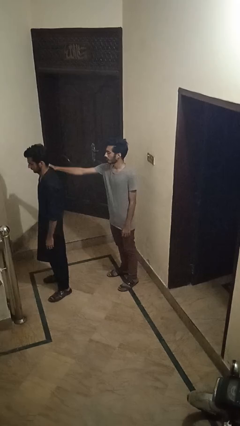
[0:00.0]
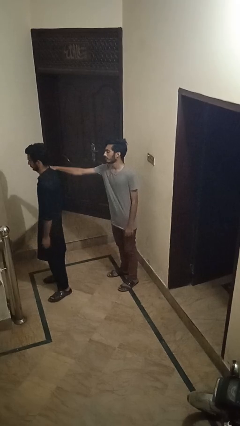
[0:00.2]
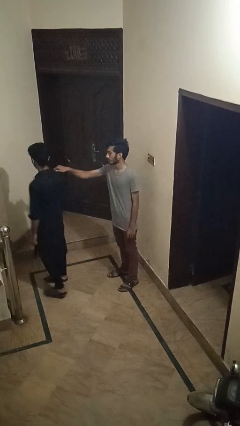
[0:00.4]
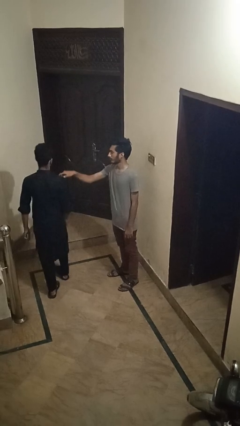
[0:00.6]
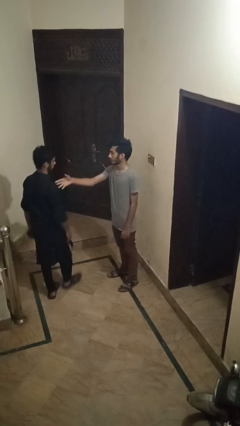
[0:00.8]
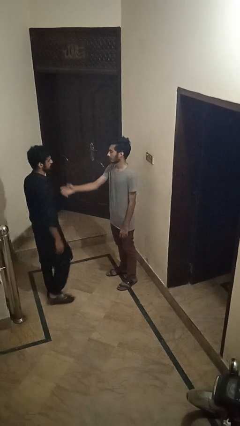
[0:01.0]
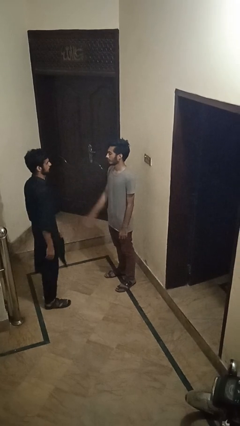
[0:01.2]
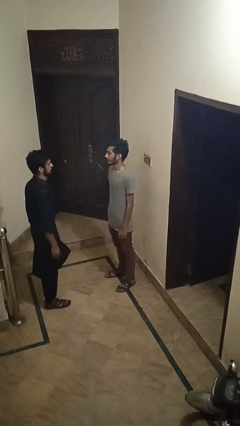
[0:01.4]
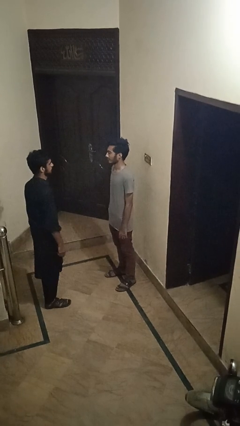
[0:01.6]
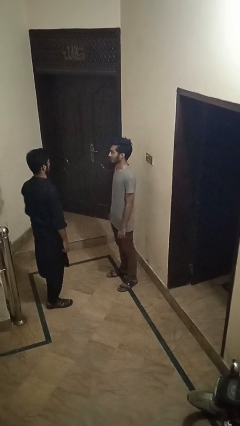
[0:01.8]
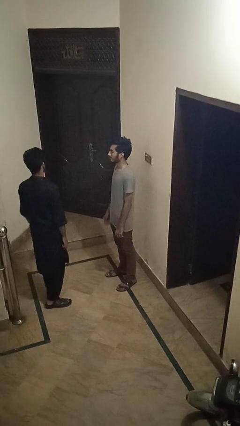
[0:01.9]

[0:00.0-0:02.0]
person spins person around

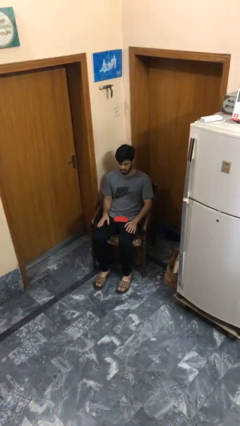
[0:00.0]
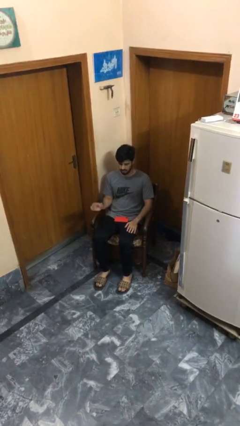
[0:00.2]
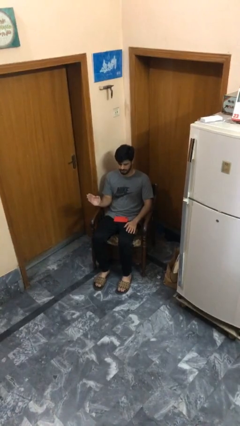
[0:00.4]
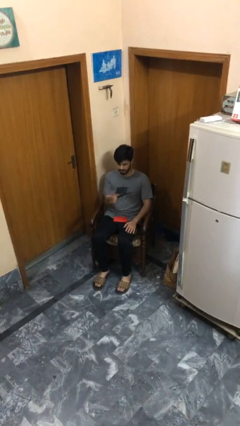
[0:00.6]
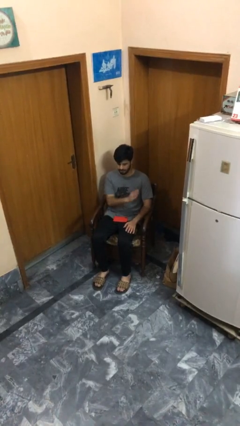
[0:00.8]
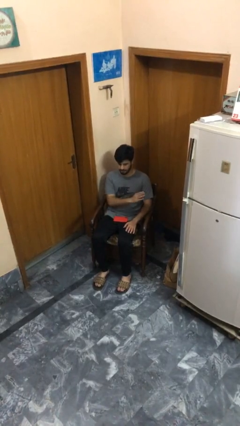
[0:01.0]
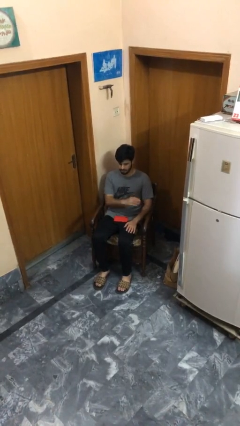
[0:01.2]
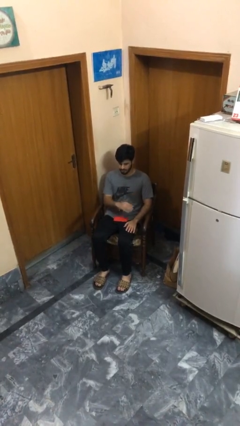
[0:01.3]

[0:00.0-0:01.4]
person gestures swipe left

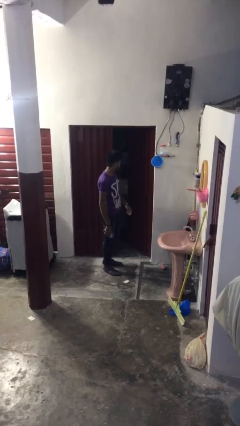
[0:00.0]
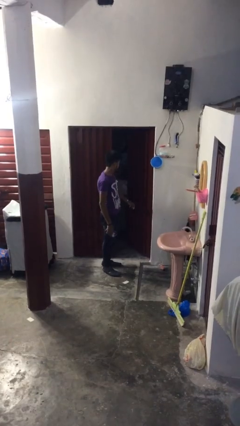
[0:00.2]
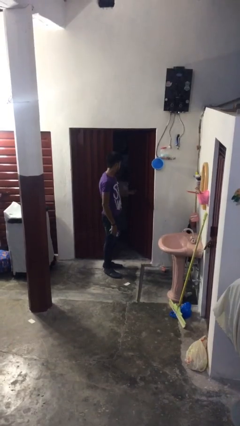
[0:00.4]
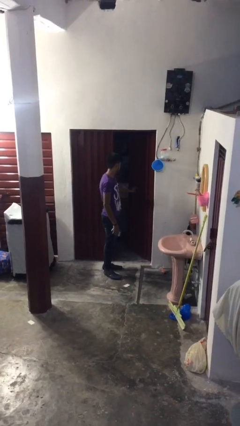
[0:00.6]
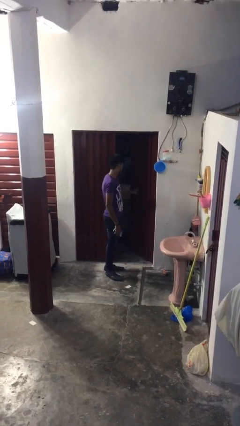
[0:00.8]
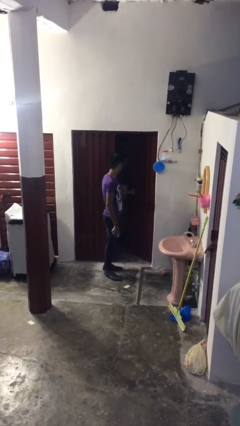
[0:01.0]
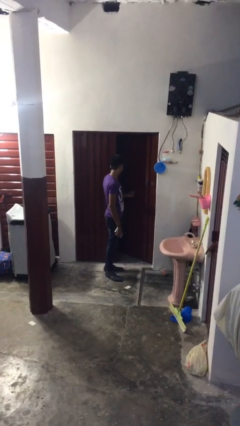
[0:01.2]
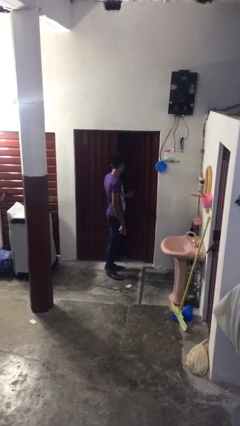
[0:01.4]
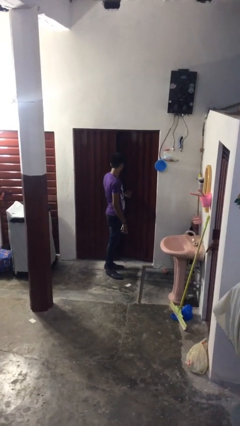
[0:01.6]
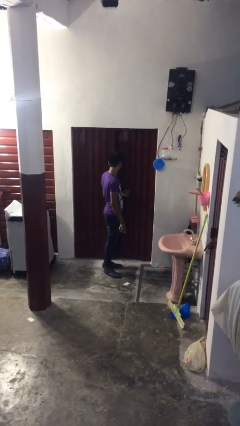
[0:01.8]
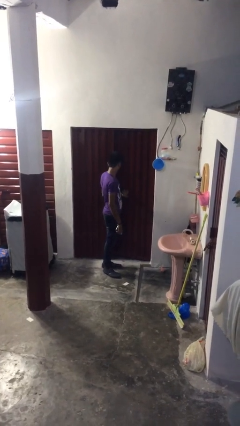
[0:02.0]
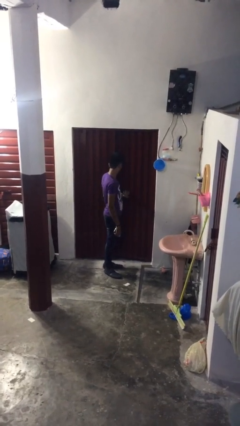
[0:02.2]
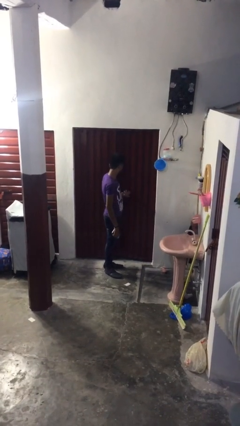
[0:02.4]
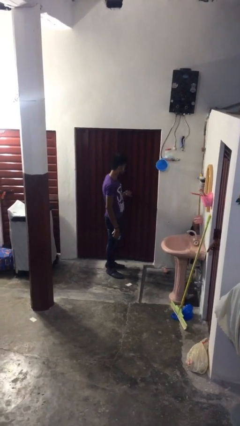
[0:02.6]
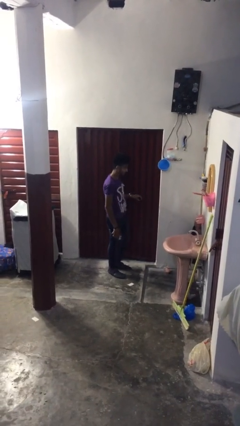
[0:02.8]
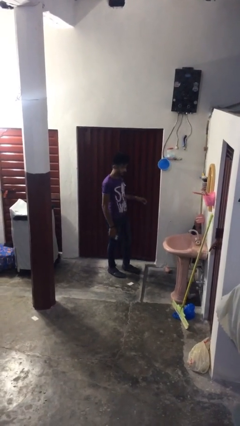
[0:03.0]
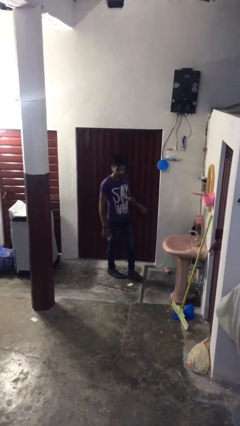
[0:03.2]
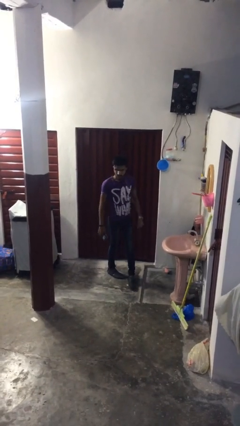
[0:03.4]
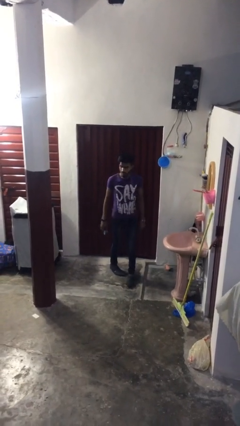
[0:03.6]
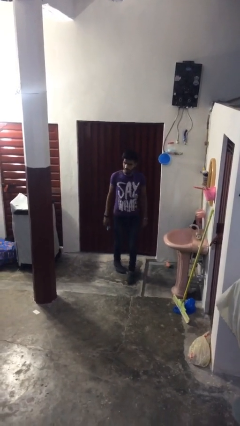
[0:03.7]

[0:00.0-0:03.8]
person closes facility door

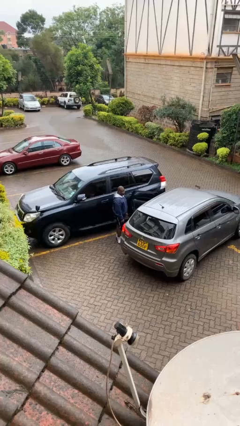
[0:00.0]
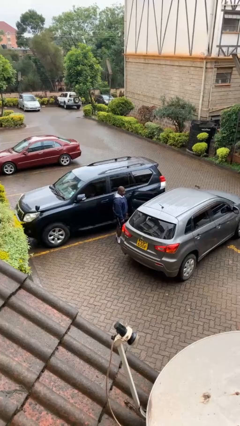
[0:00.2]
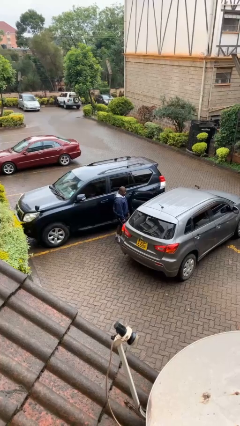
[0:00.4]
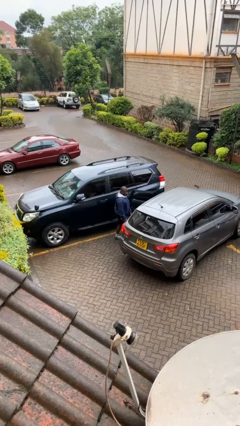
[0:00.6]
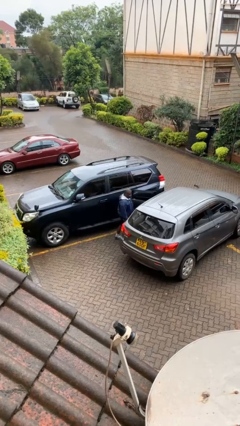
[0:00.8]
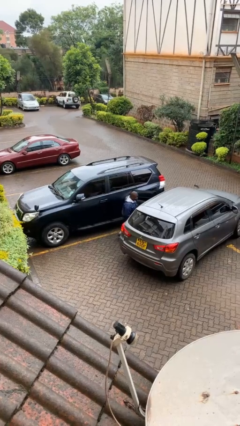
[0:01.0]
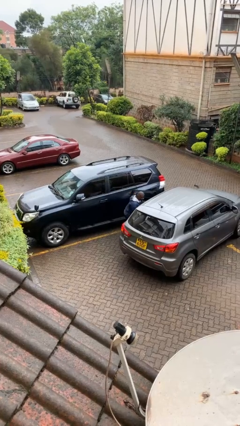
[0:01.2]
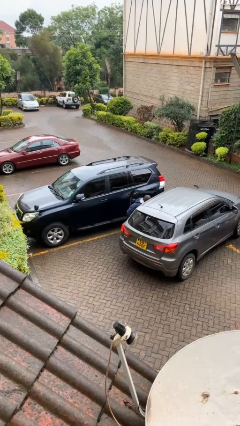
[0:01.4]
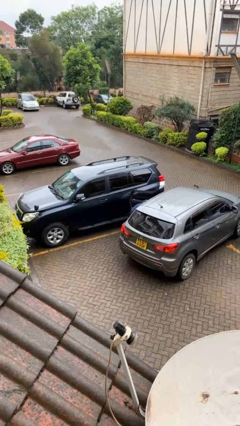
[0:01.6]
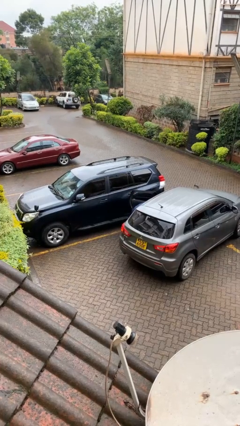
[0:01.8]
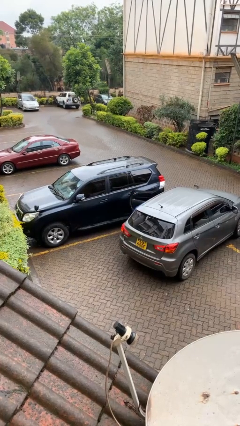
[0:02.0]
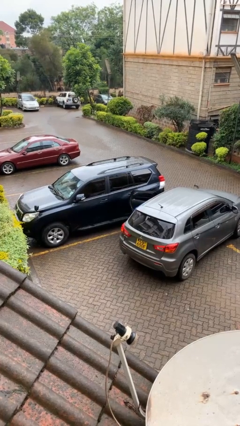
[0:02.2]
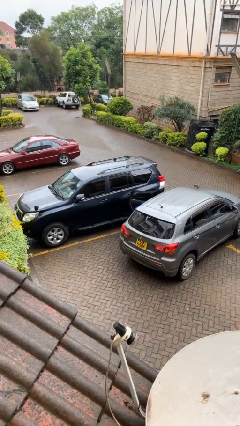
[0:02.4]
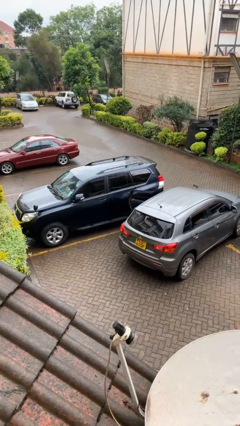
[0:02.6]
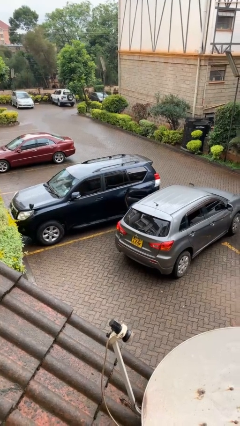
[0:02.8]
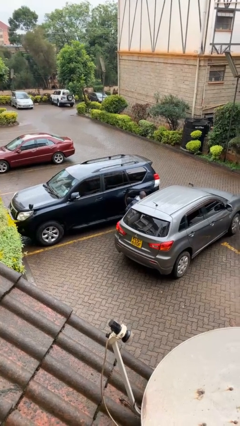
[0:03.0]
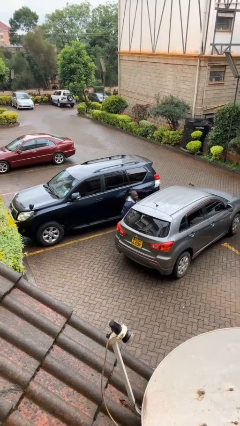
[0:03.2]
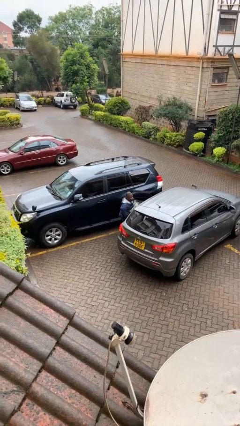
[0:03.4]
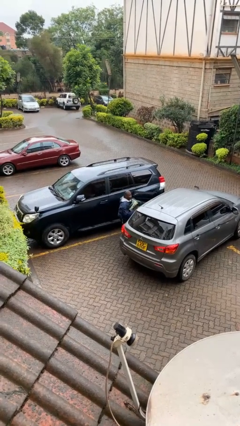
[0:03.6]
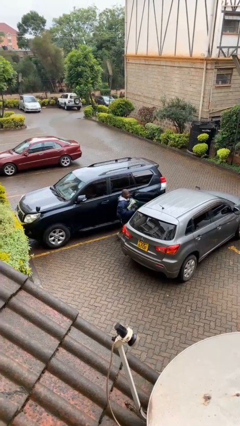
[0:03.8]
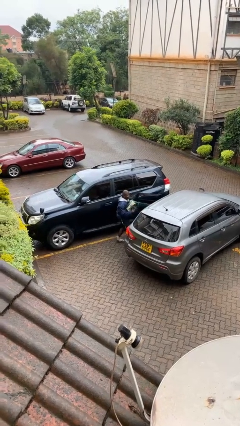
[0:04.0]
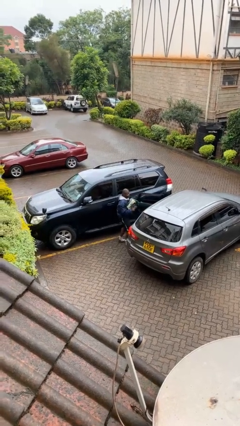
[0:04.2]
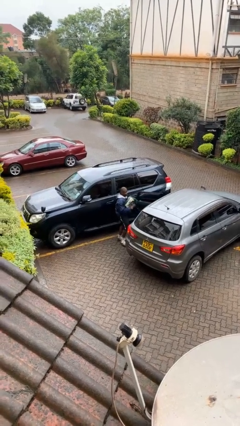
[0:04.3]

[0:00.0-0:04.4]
person unloads car

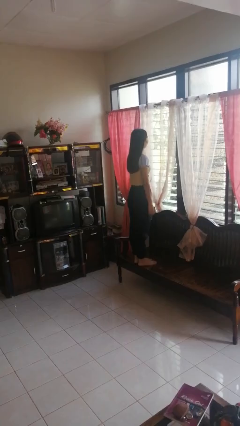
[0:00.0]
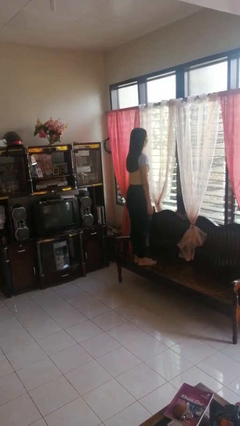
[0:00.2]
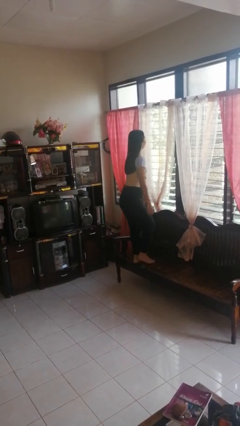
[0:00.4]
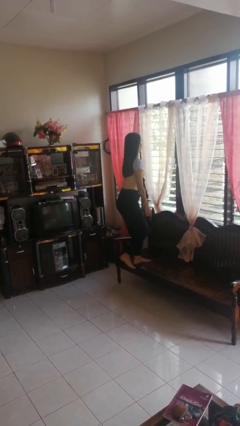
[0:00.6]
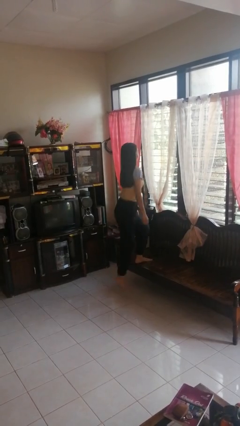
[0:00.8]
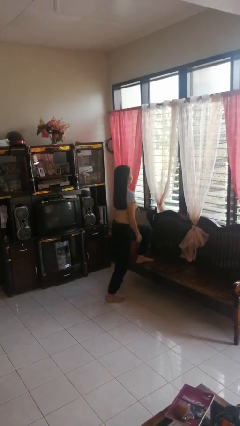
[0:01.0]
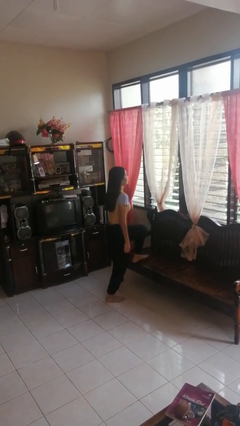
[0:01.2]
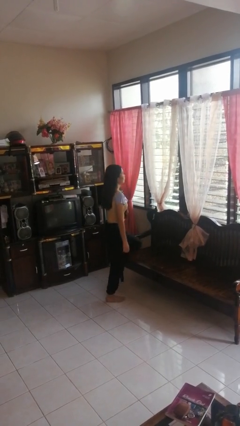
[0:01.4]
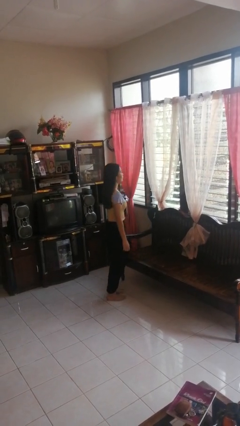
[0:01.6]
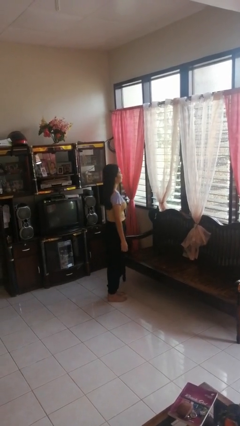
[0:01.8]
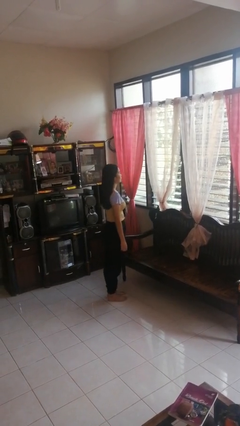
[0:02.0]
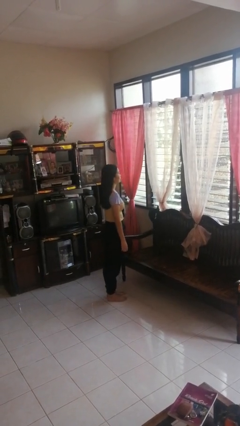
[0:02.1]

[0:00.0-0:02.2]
person climbs off couch

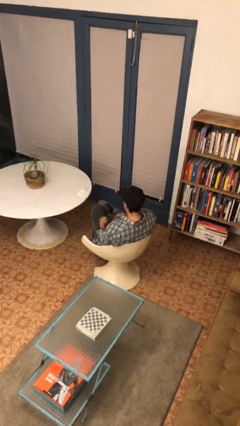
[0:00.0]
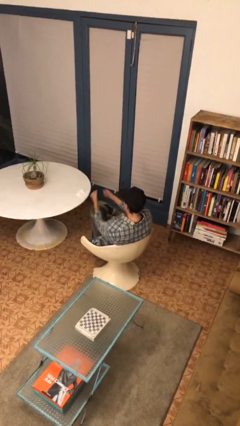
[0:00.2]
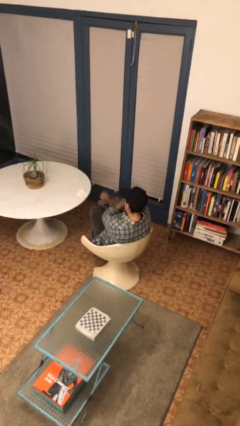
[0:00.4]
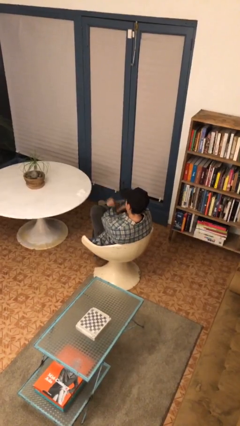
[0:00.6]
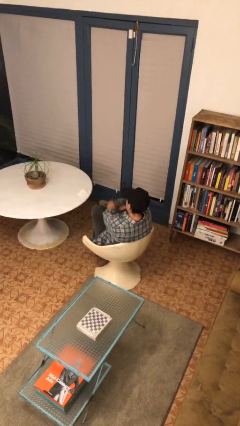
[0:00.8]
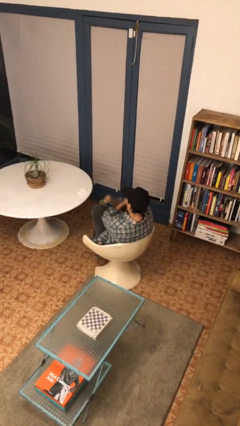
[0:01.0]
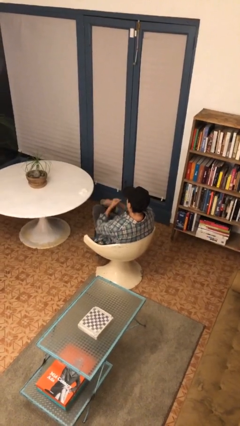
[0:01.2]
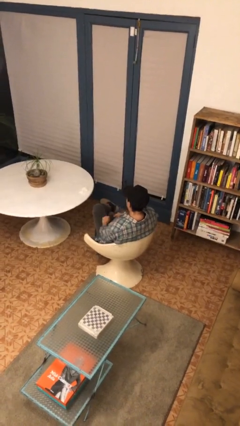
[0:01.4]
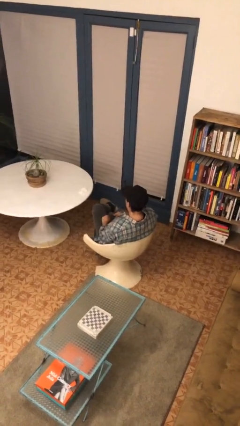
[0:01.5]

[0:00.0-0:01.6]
person gestures arms x

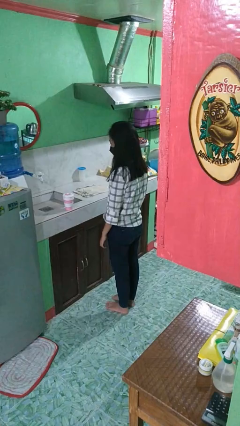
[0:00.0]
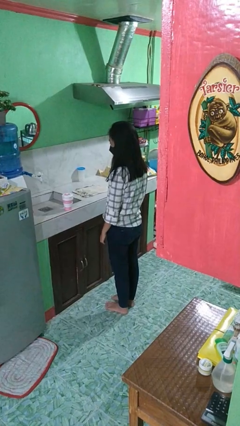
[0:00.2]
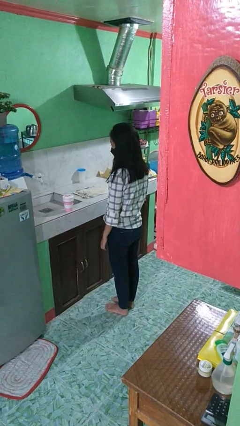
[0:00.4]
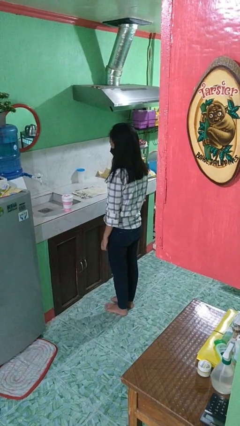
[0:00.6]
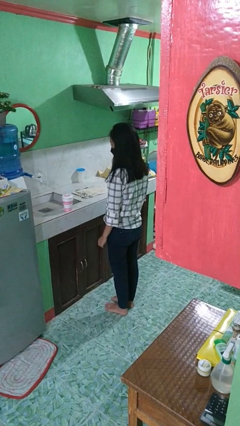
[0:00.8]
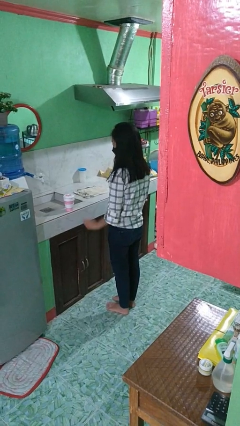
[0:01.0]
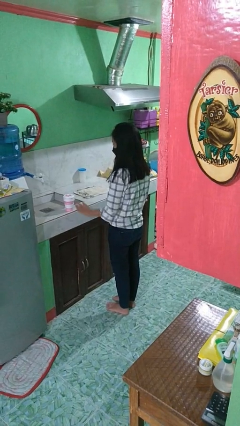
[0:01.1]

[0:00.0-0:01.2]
person picks up object from countertop

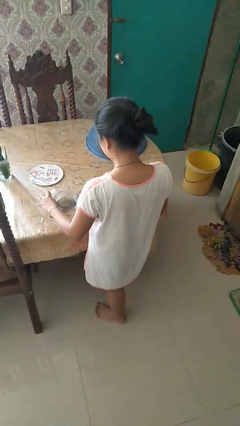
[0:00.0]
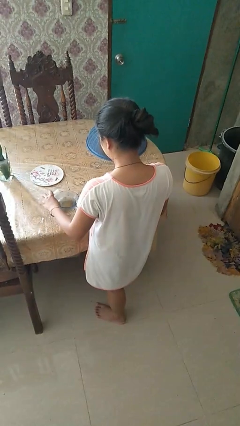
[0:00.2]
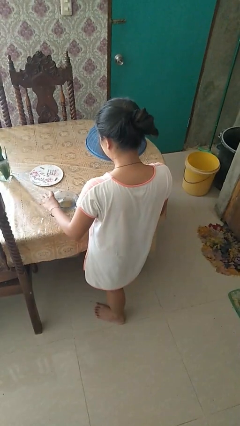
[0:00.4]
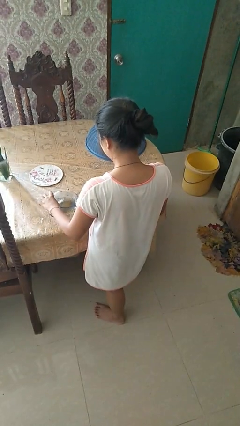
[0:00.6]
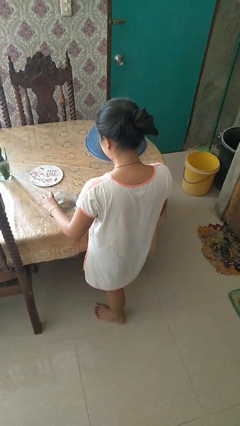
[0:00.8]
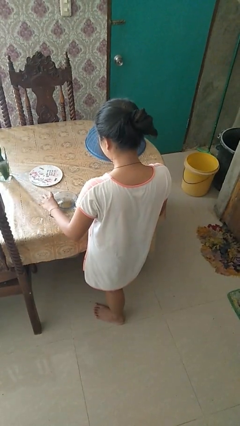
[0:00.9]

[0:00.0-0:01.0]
person pours into bowl
